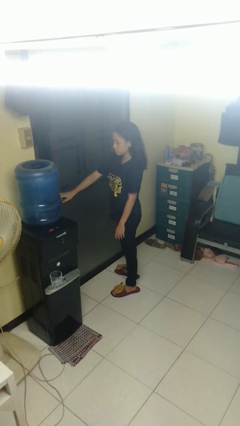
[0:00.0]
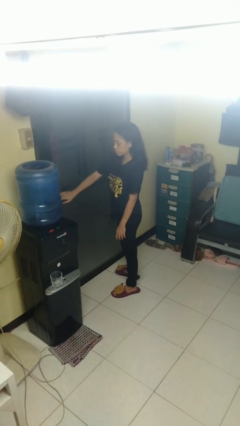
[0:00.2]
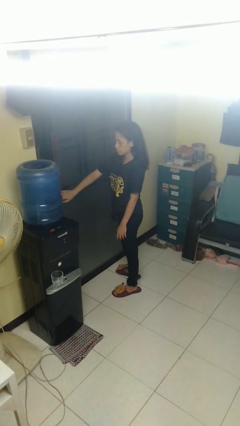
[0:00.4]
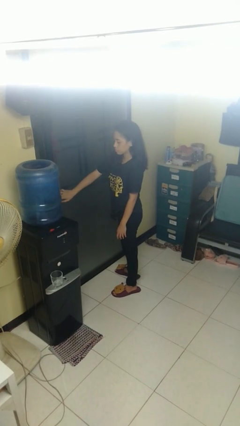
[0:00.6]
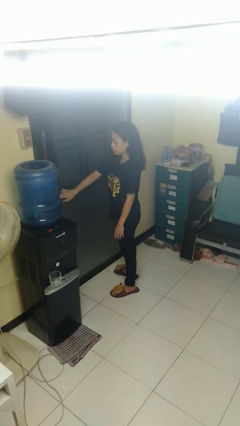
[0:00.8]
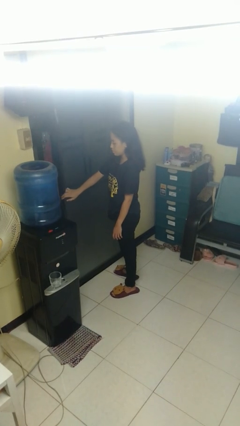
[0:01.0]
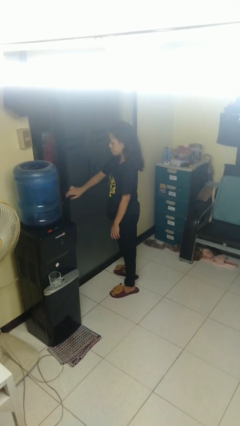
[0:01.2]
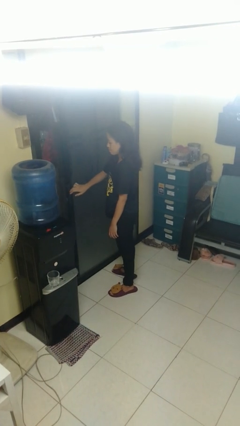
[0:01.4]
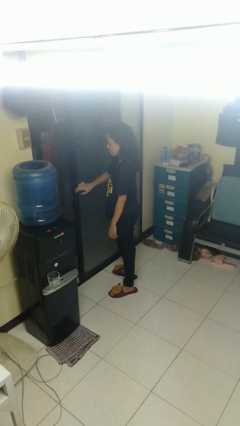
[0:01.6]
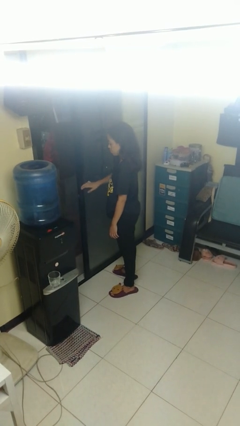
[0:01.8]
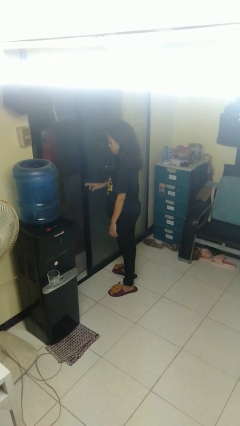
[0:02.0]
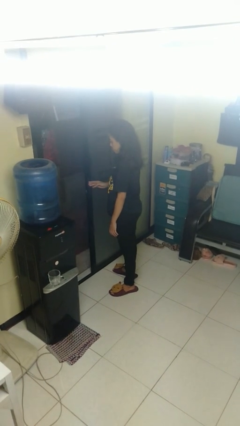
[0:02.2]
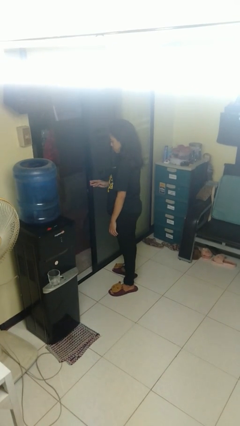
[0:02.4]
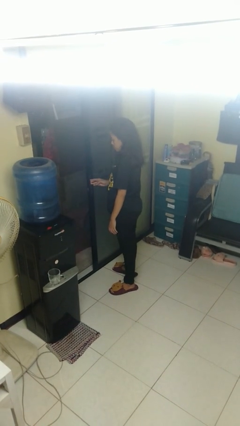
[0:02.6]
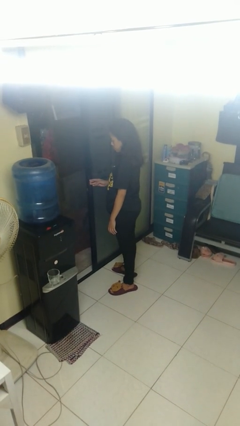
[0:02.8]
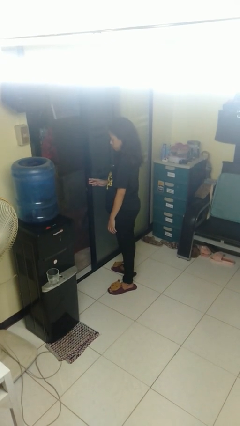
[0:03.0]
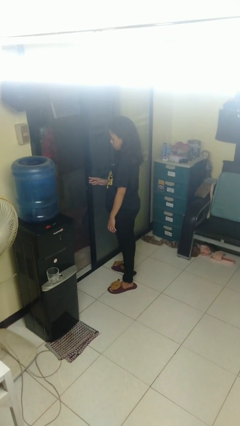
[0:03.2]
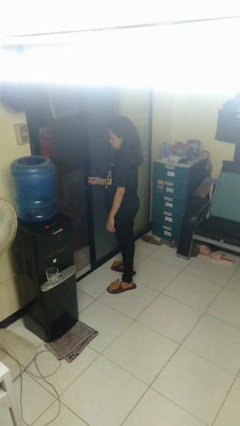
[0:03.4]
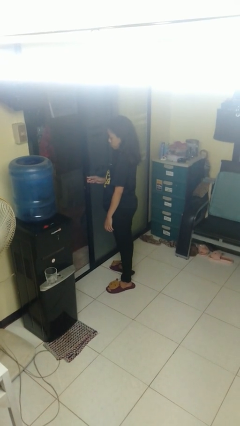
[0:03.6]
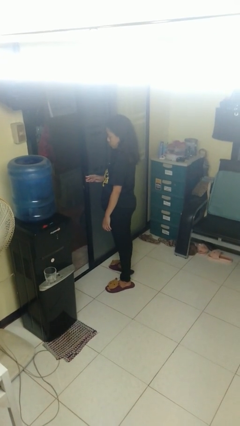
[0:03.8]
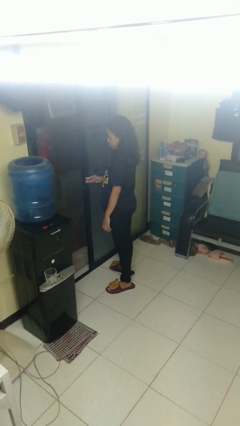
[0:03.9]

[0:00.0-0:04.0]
person opens sliding door

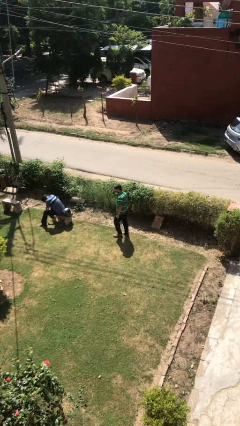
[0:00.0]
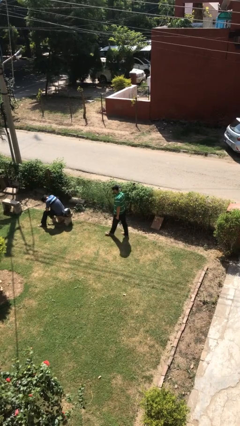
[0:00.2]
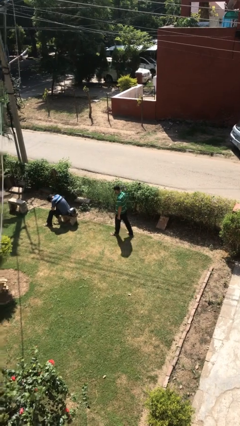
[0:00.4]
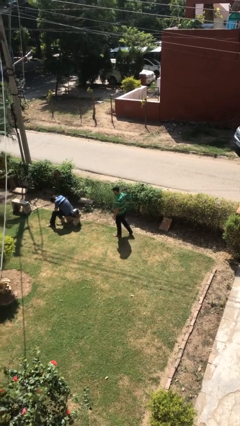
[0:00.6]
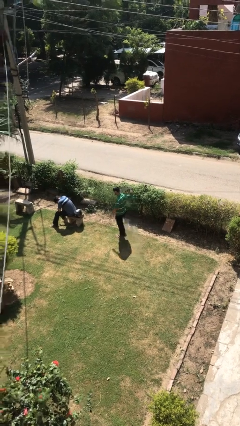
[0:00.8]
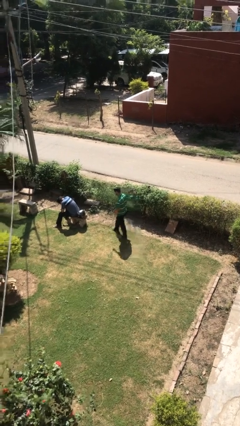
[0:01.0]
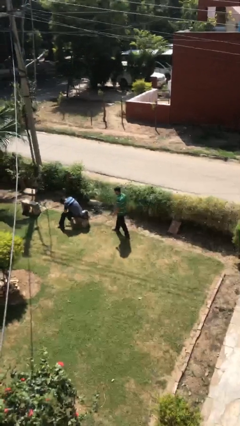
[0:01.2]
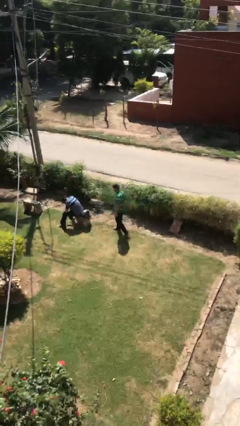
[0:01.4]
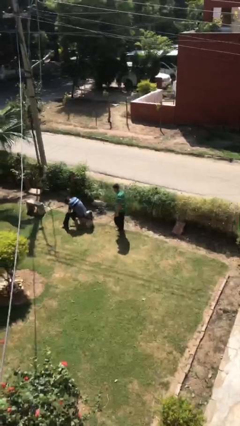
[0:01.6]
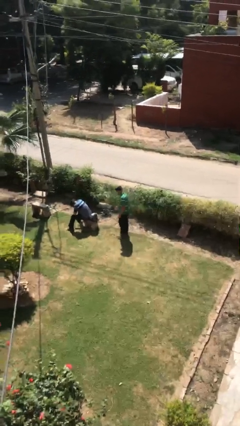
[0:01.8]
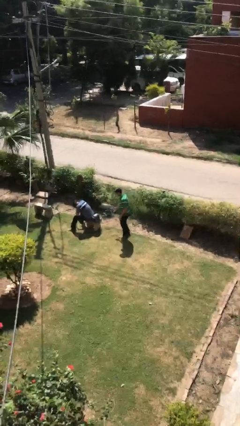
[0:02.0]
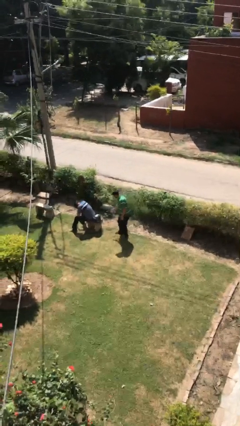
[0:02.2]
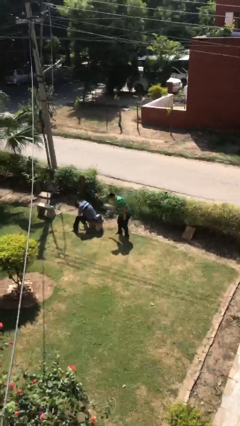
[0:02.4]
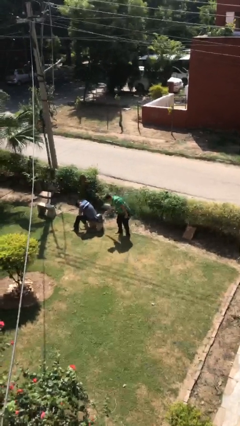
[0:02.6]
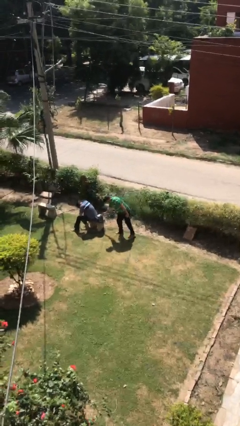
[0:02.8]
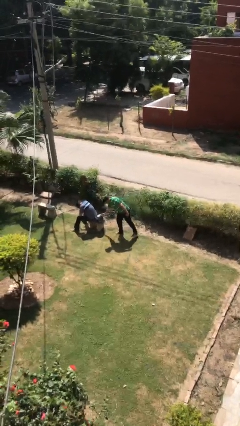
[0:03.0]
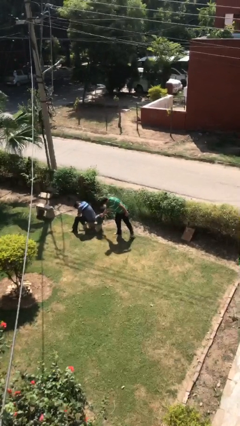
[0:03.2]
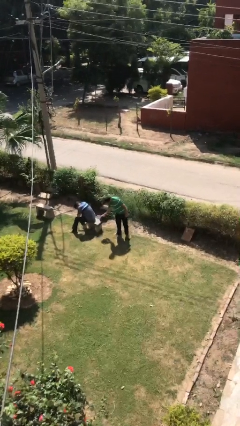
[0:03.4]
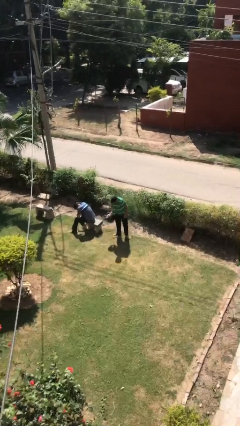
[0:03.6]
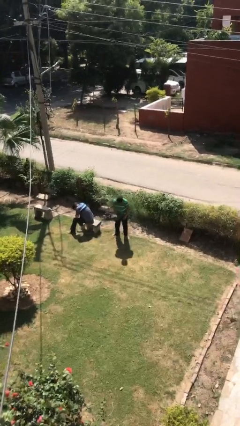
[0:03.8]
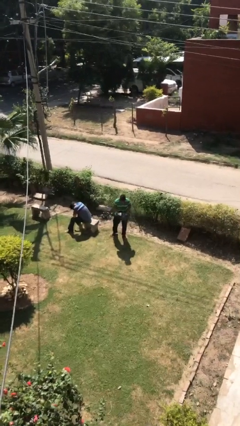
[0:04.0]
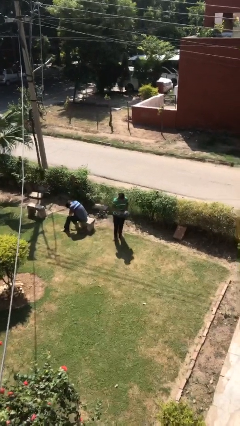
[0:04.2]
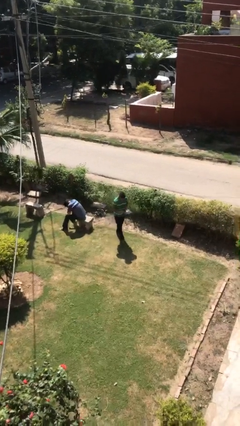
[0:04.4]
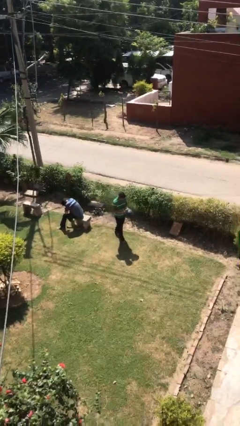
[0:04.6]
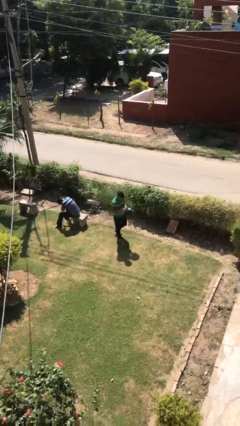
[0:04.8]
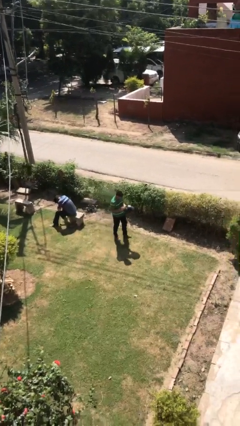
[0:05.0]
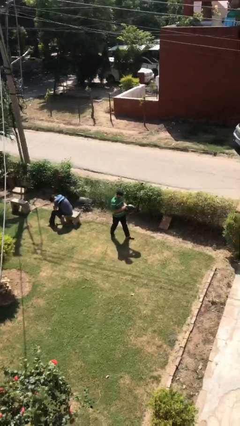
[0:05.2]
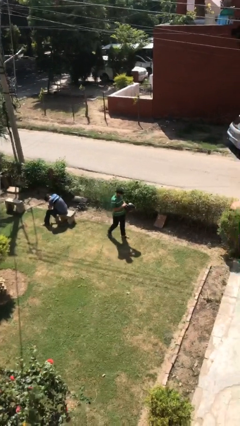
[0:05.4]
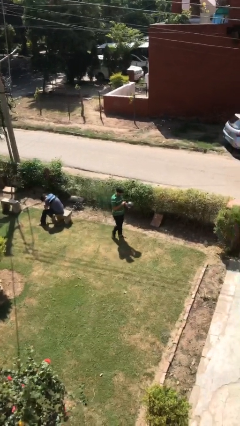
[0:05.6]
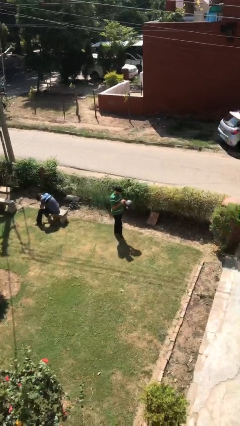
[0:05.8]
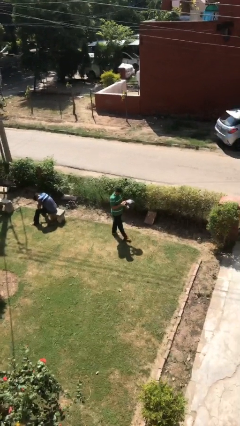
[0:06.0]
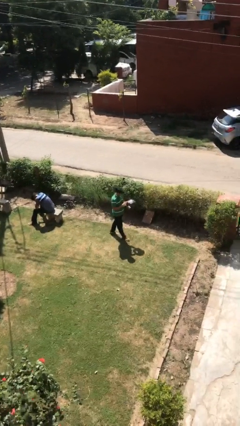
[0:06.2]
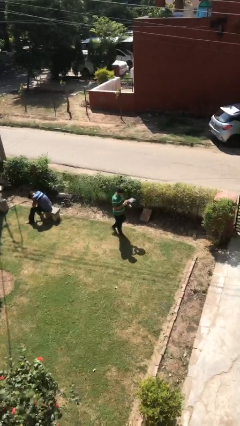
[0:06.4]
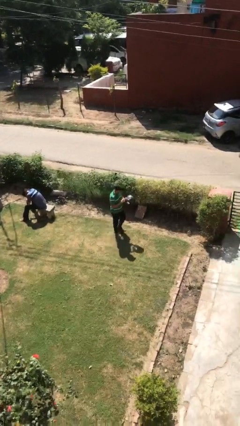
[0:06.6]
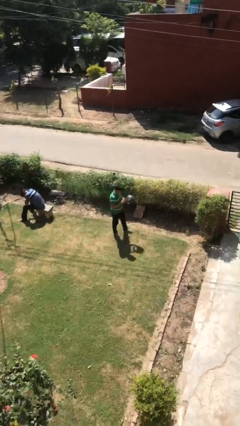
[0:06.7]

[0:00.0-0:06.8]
person steals object from person

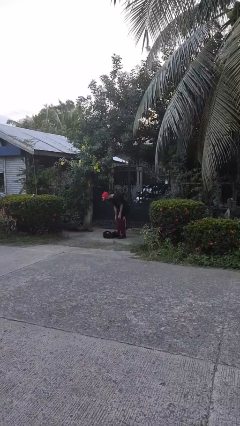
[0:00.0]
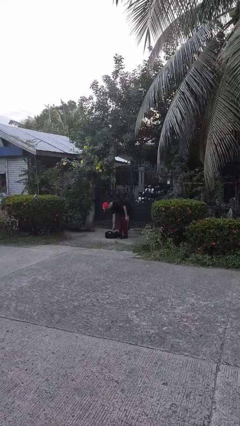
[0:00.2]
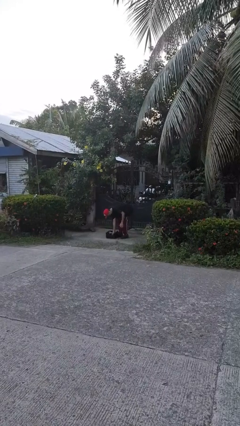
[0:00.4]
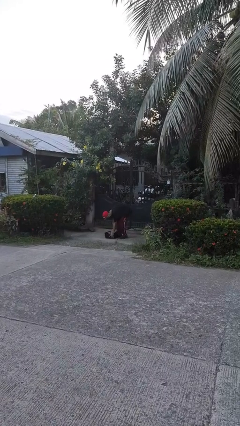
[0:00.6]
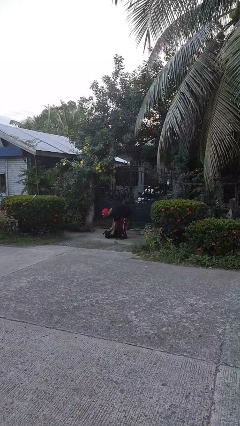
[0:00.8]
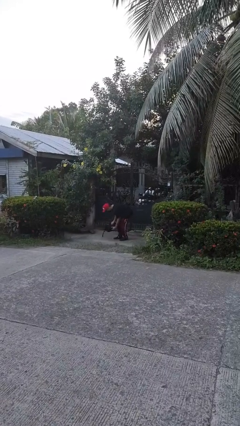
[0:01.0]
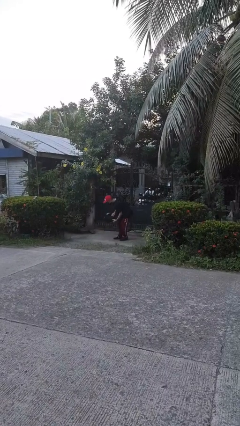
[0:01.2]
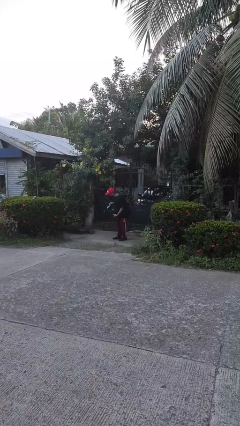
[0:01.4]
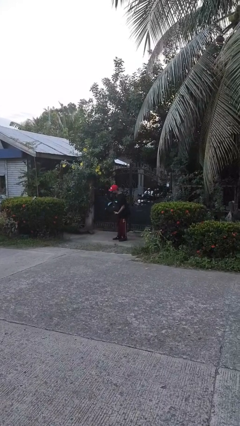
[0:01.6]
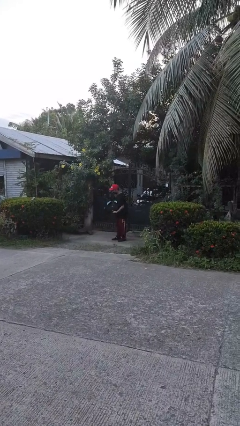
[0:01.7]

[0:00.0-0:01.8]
person picks up object from floor

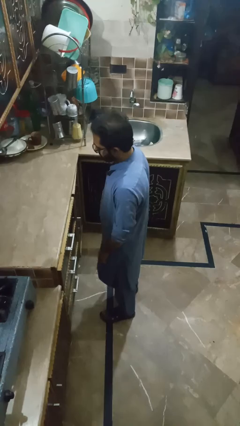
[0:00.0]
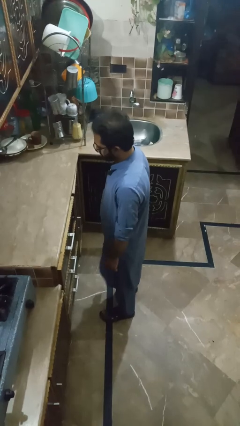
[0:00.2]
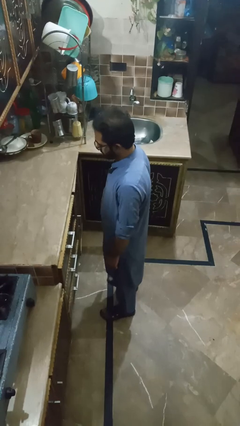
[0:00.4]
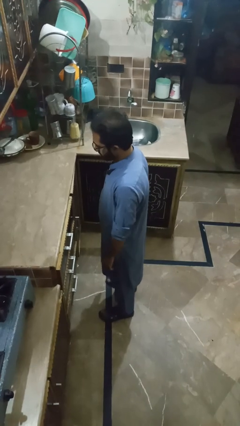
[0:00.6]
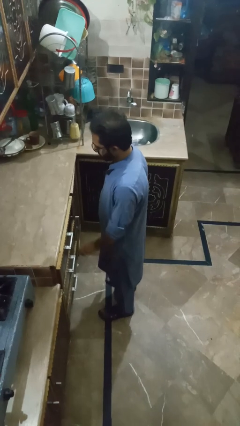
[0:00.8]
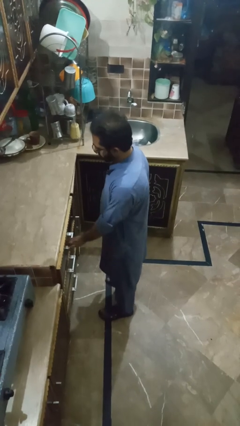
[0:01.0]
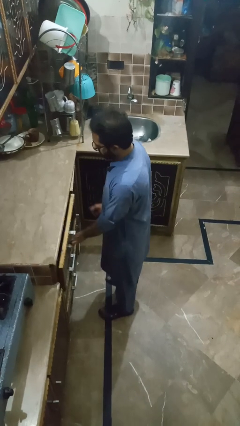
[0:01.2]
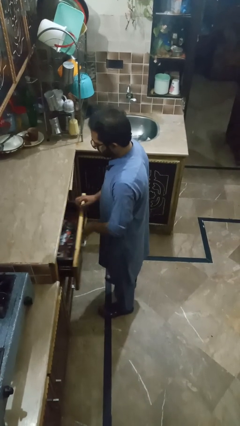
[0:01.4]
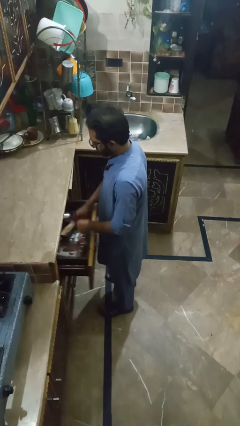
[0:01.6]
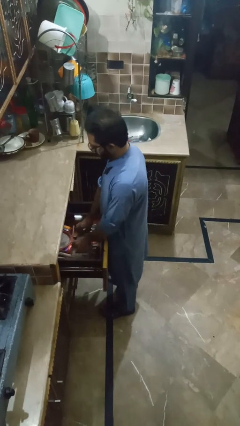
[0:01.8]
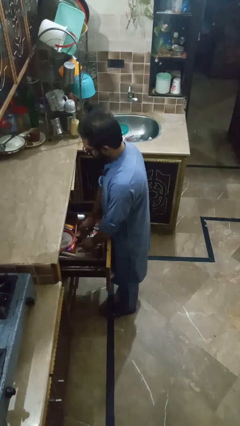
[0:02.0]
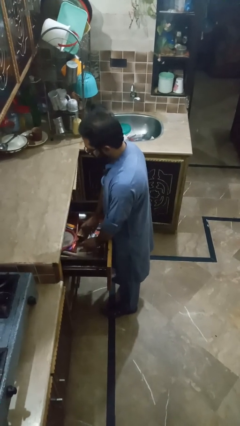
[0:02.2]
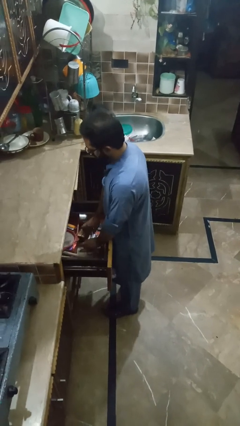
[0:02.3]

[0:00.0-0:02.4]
person searches in kitchen drawer

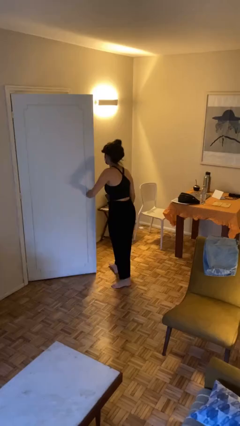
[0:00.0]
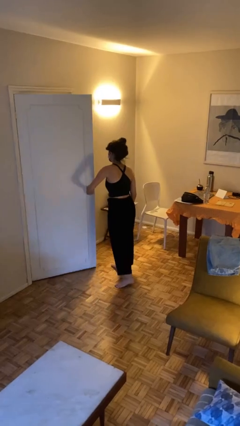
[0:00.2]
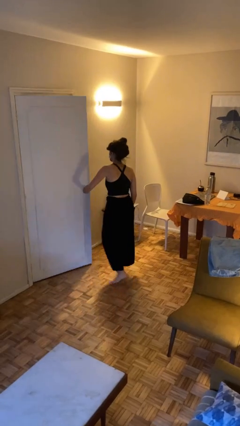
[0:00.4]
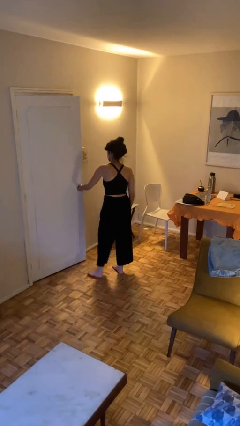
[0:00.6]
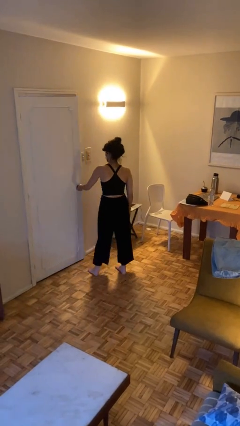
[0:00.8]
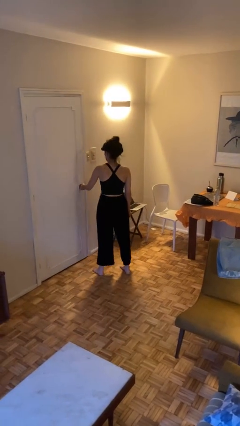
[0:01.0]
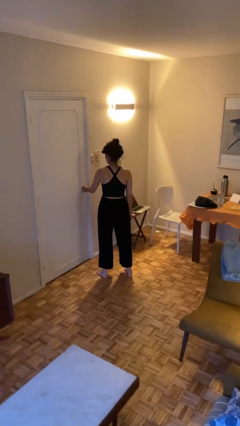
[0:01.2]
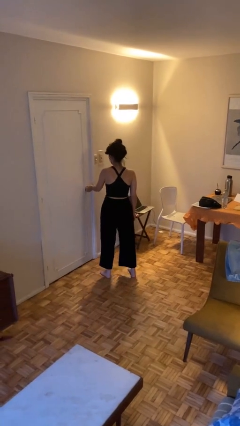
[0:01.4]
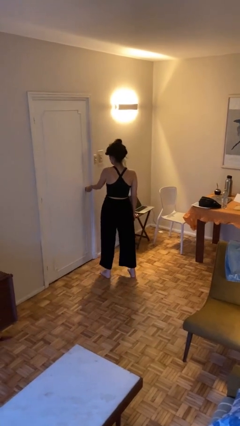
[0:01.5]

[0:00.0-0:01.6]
person closes facility door

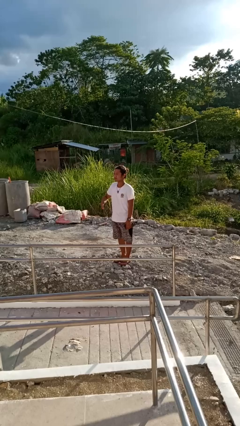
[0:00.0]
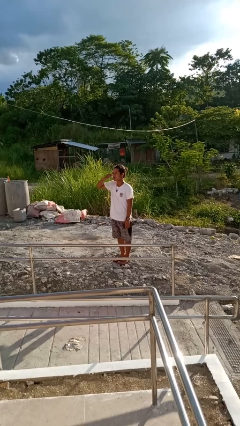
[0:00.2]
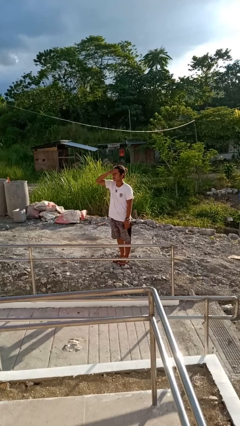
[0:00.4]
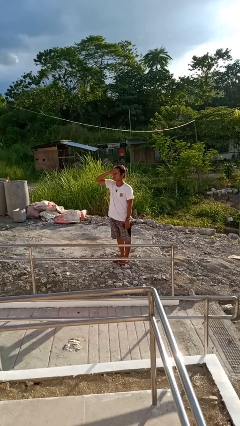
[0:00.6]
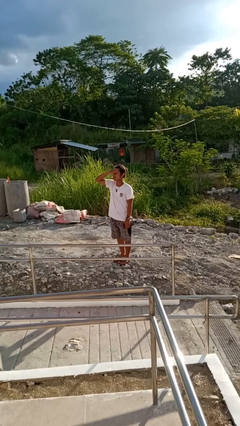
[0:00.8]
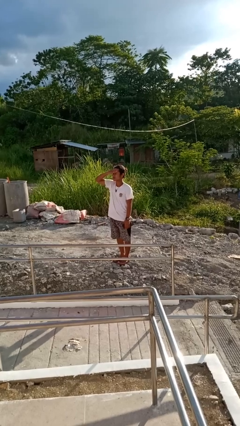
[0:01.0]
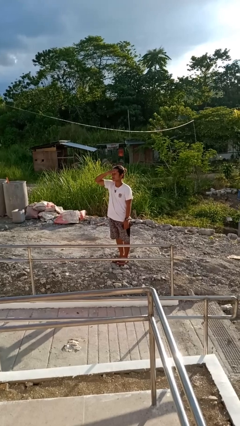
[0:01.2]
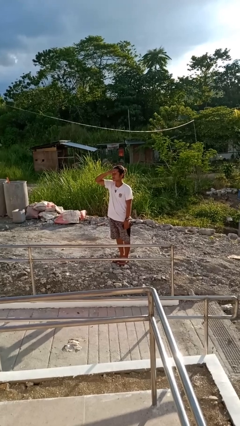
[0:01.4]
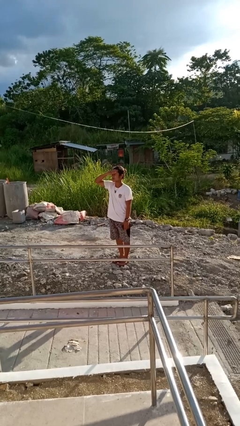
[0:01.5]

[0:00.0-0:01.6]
person shades eyes
